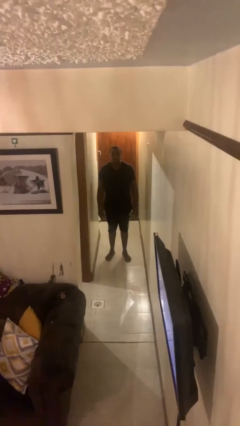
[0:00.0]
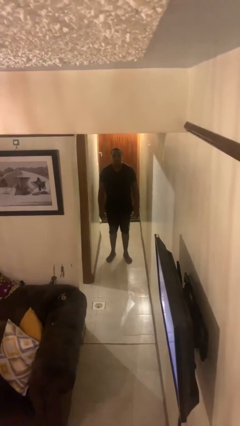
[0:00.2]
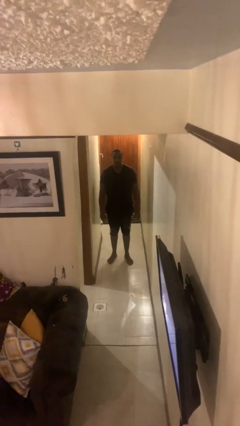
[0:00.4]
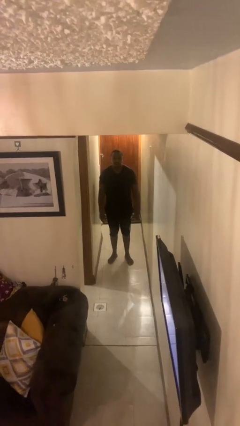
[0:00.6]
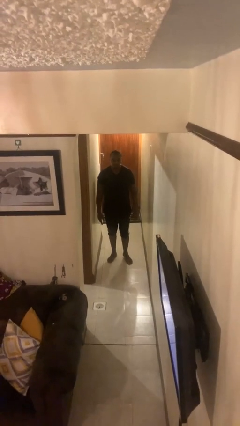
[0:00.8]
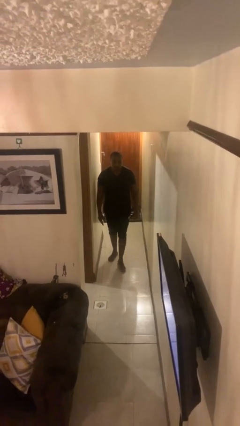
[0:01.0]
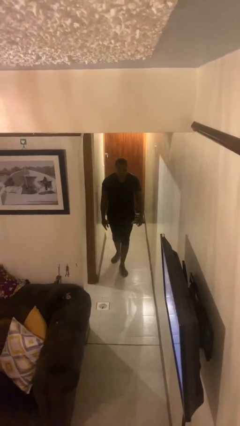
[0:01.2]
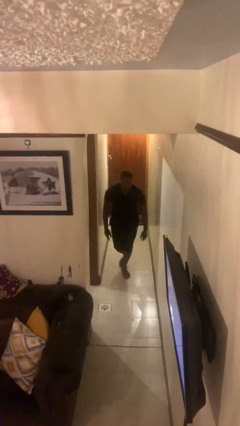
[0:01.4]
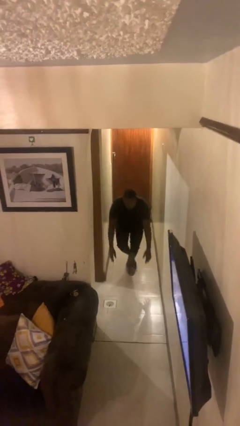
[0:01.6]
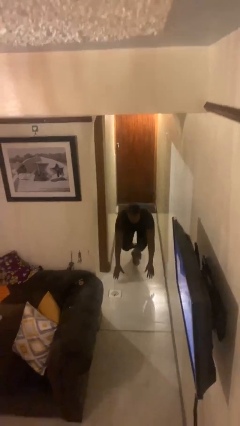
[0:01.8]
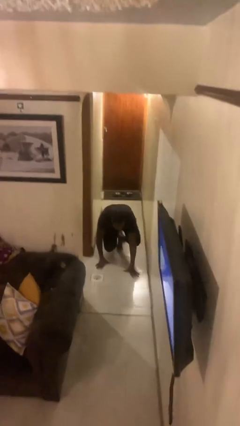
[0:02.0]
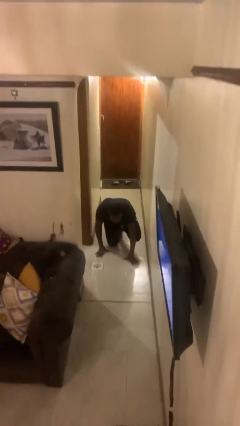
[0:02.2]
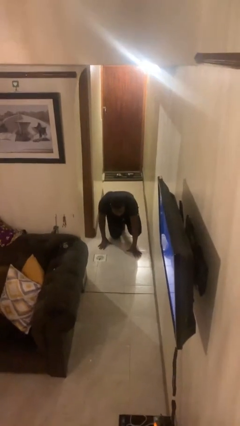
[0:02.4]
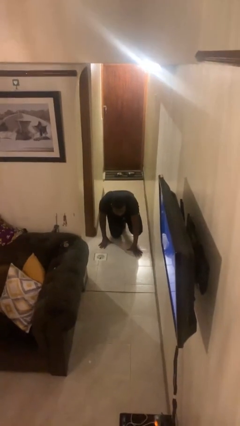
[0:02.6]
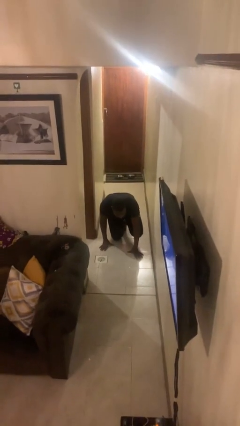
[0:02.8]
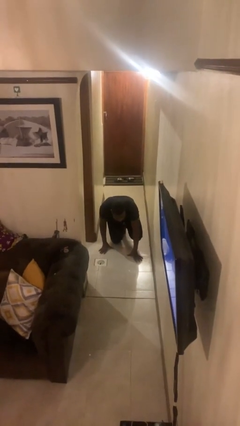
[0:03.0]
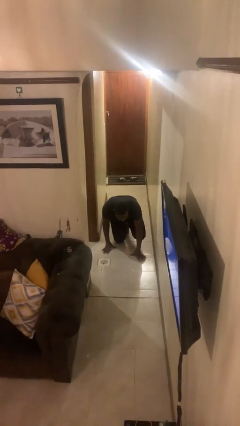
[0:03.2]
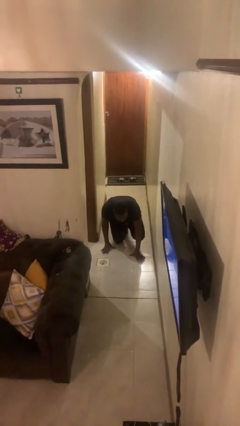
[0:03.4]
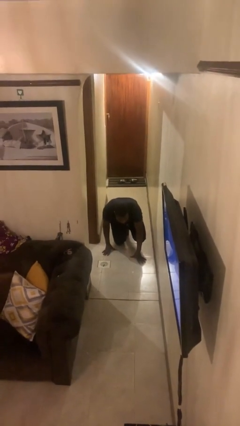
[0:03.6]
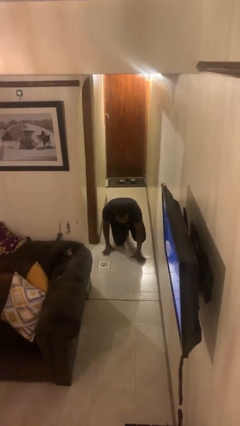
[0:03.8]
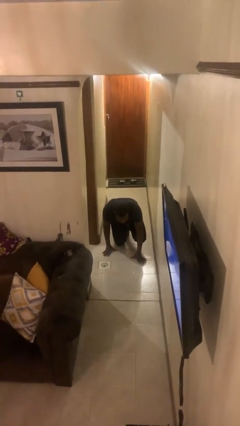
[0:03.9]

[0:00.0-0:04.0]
person trips on object on floor

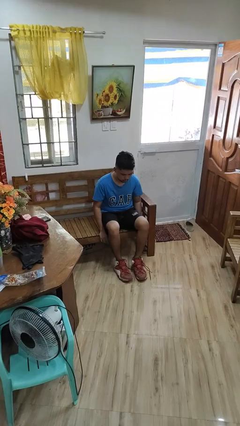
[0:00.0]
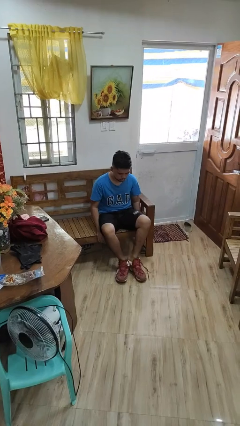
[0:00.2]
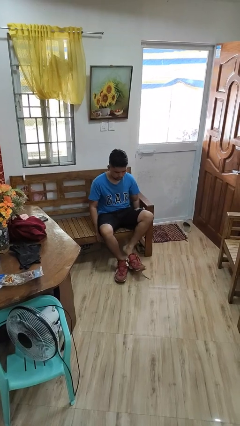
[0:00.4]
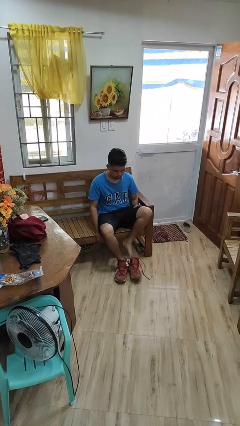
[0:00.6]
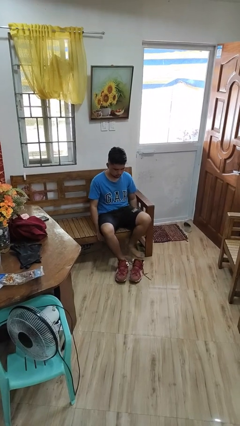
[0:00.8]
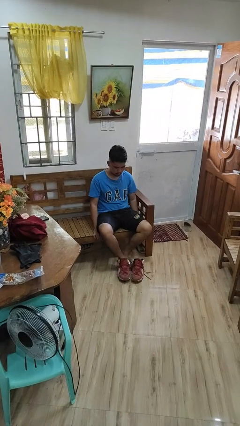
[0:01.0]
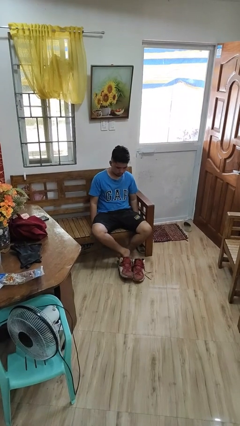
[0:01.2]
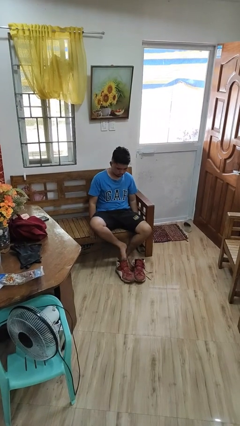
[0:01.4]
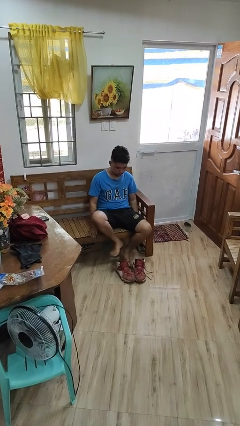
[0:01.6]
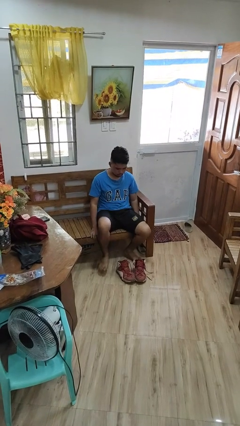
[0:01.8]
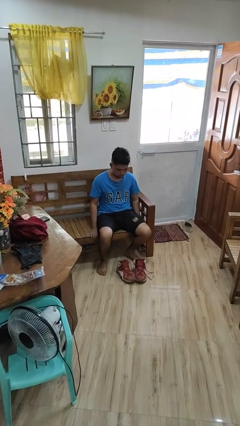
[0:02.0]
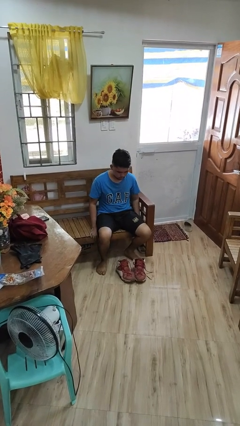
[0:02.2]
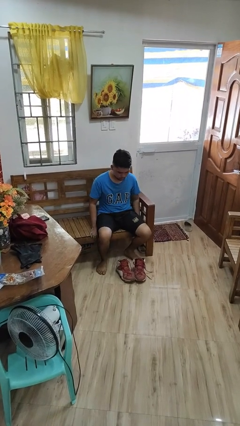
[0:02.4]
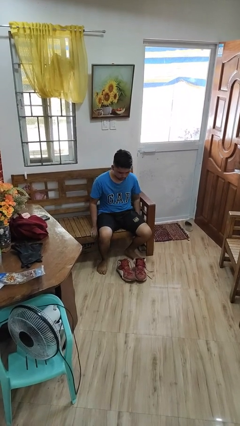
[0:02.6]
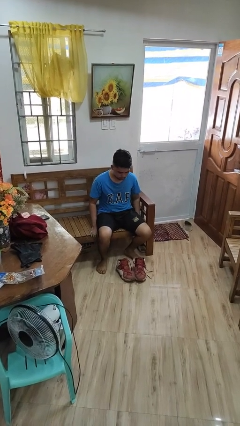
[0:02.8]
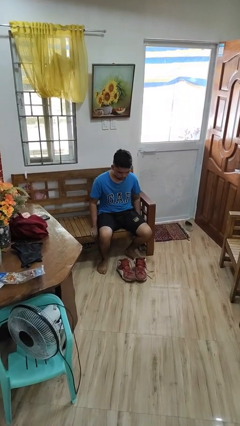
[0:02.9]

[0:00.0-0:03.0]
person takes off shoes

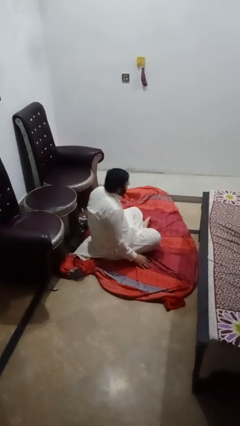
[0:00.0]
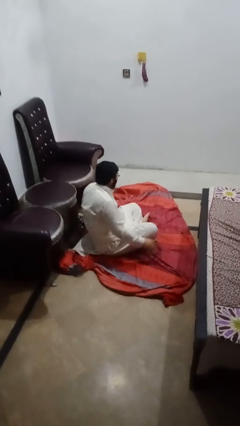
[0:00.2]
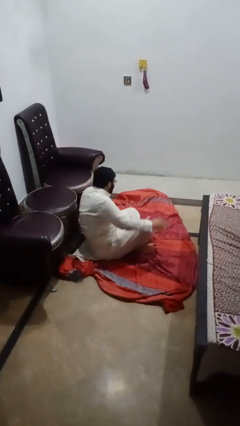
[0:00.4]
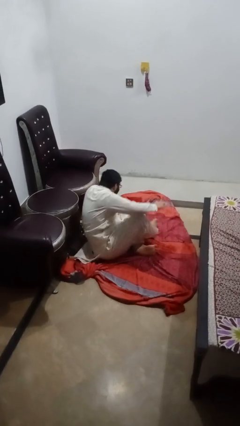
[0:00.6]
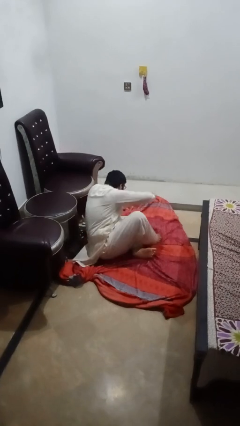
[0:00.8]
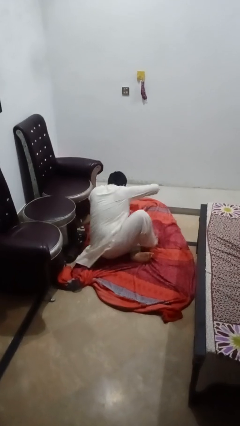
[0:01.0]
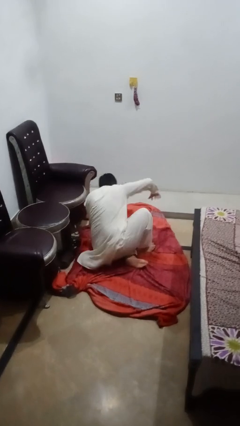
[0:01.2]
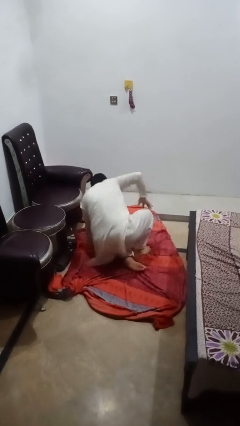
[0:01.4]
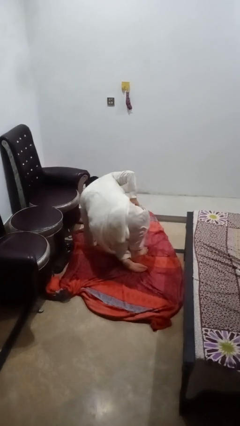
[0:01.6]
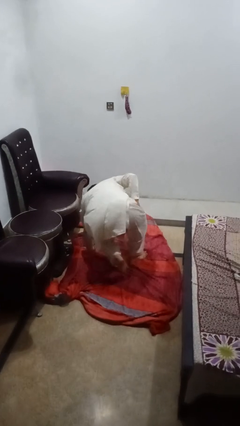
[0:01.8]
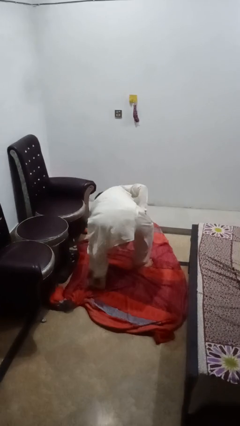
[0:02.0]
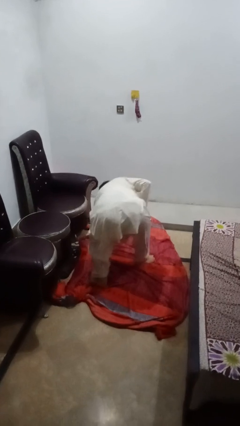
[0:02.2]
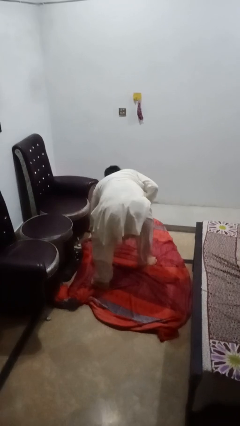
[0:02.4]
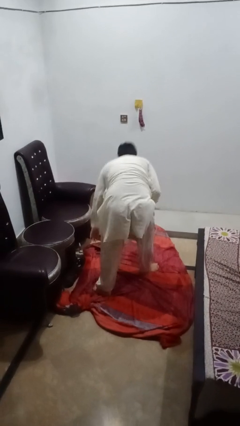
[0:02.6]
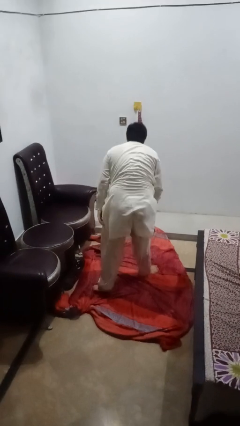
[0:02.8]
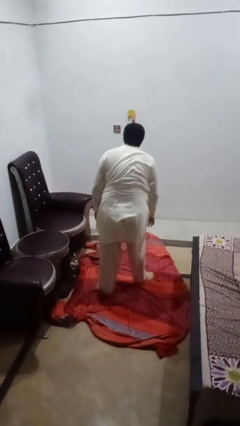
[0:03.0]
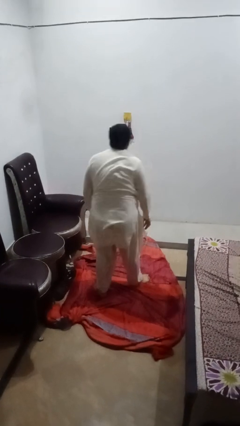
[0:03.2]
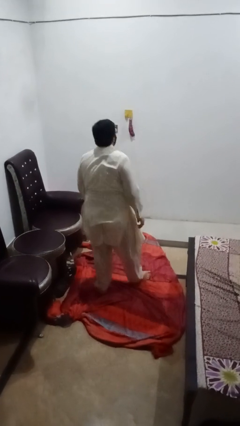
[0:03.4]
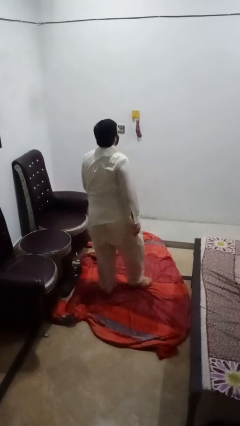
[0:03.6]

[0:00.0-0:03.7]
person stands up from floor

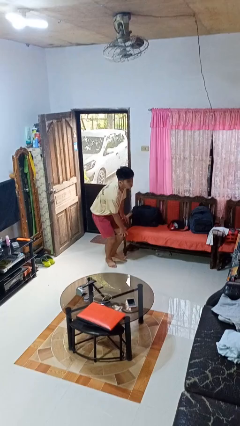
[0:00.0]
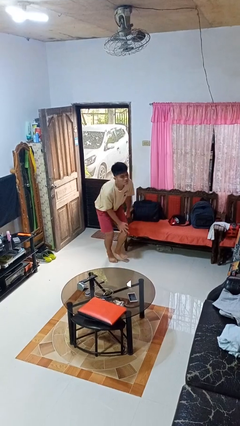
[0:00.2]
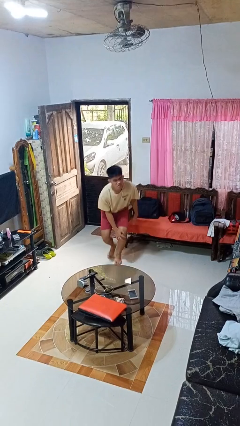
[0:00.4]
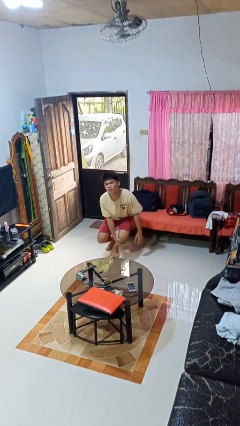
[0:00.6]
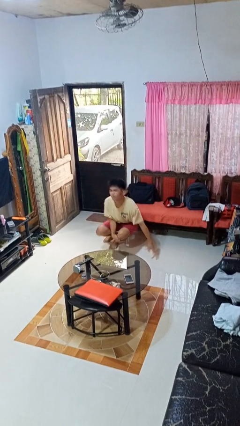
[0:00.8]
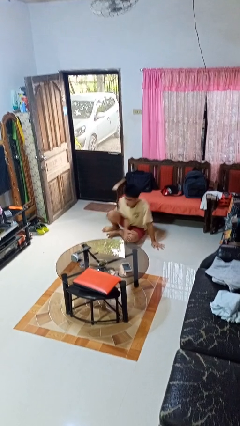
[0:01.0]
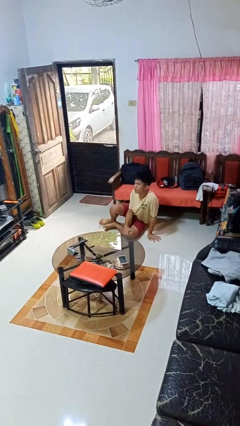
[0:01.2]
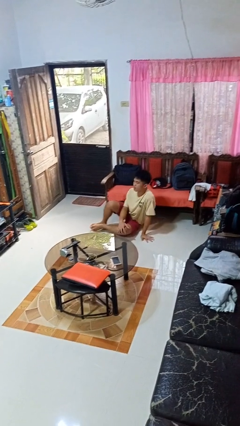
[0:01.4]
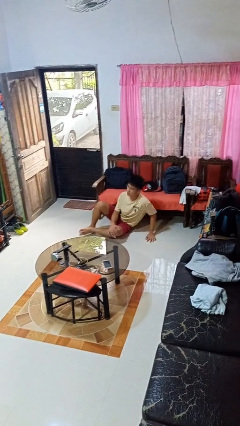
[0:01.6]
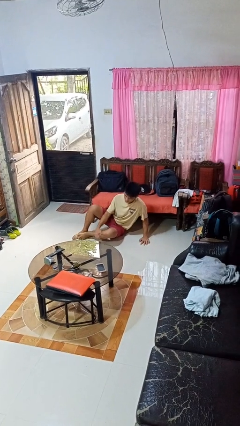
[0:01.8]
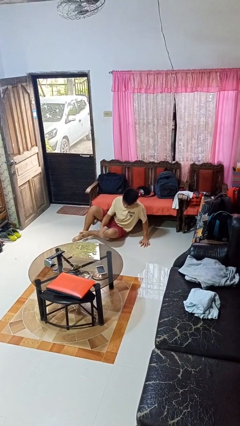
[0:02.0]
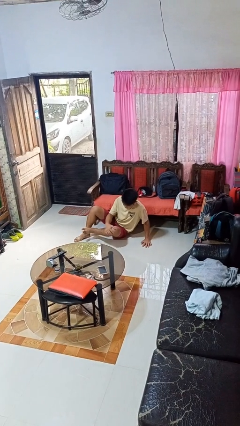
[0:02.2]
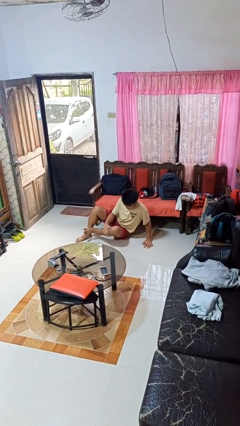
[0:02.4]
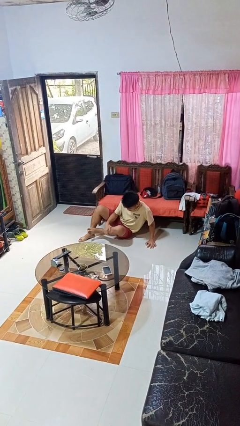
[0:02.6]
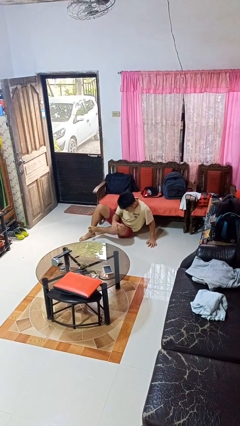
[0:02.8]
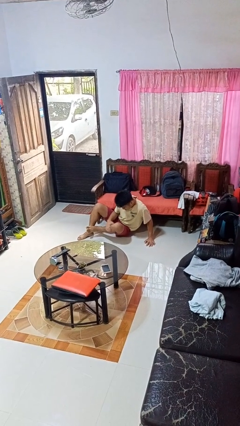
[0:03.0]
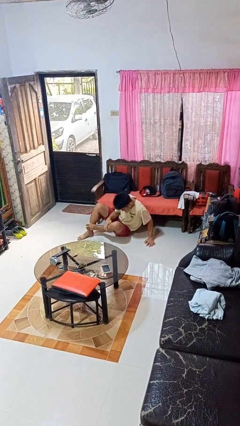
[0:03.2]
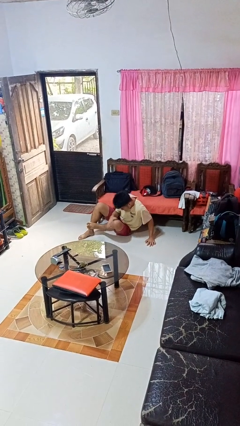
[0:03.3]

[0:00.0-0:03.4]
person lies down on floor

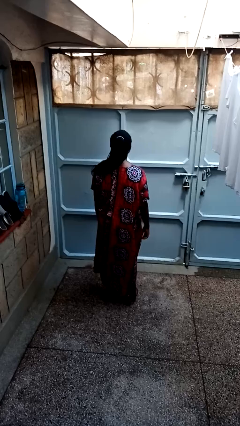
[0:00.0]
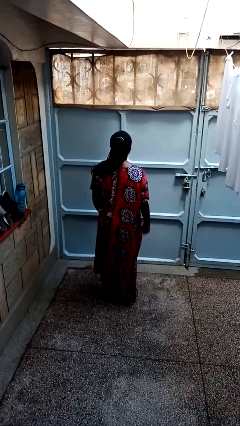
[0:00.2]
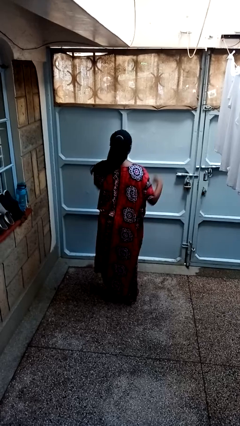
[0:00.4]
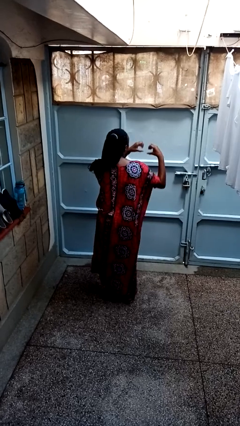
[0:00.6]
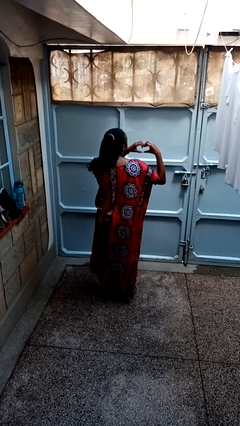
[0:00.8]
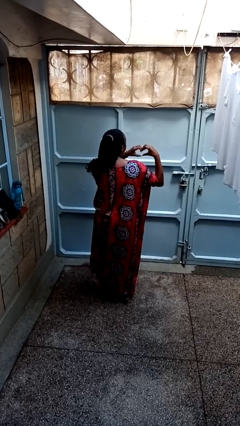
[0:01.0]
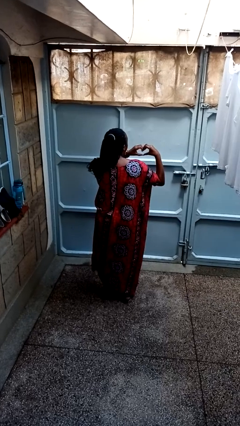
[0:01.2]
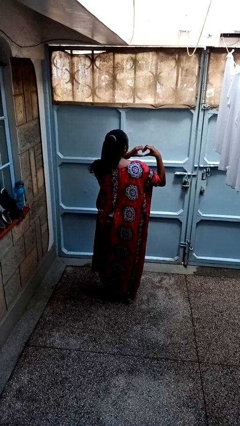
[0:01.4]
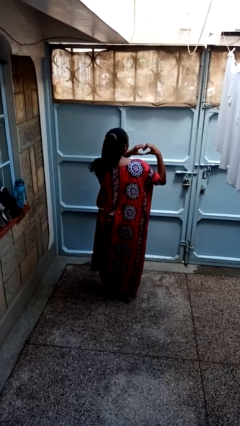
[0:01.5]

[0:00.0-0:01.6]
person gestures heart

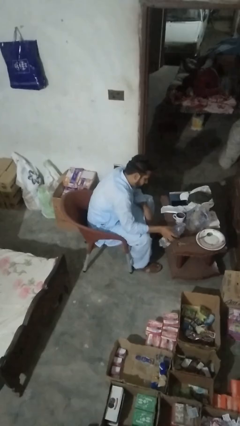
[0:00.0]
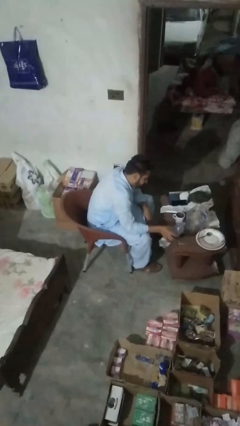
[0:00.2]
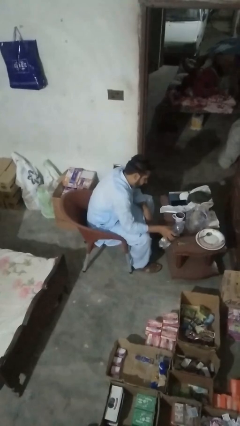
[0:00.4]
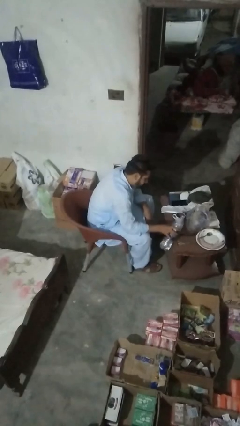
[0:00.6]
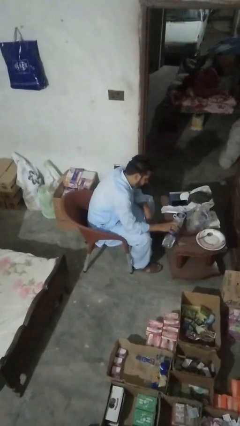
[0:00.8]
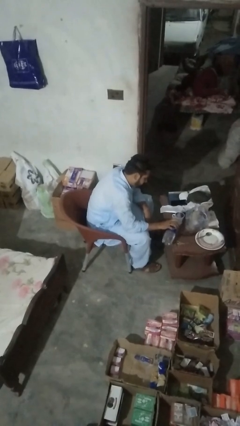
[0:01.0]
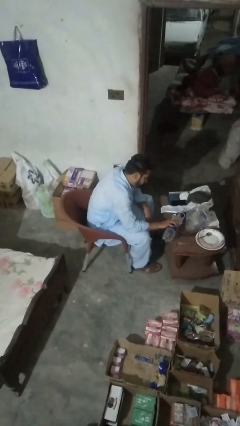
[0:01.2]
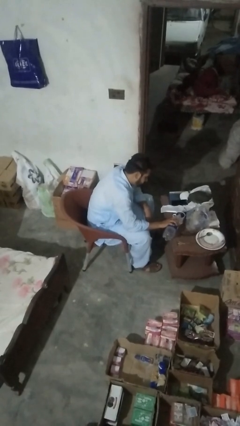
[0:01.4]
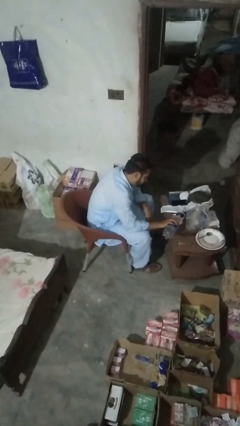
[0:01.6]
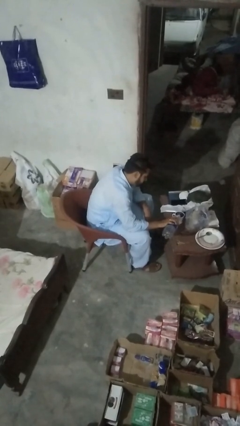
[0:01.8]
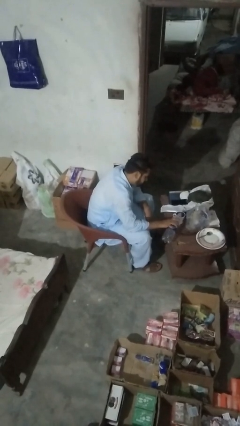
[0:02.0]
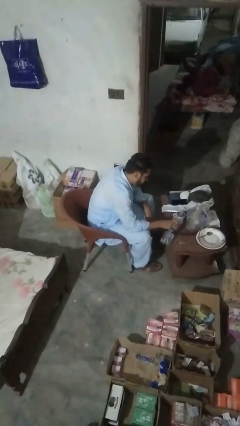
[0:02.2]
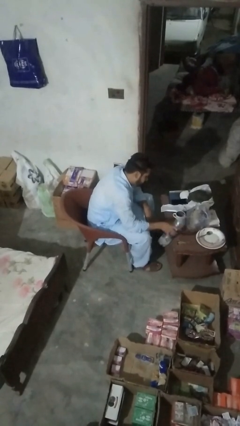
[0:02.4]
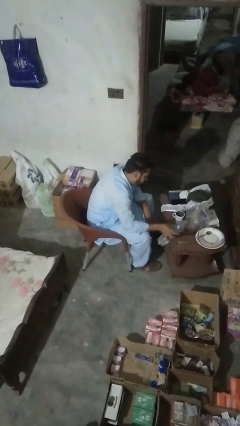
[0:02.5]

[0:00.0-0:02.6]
person pours liquid into cup
